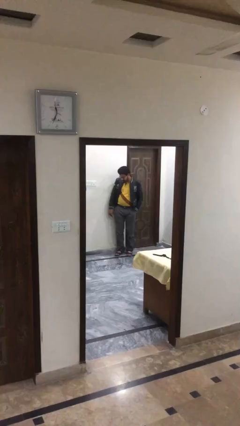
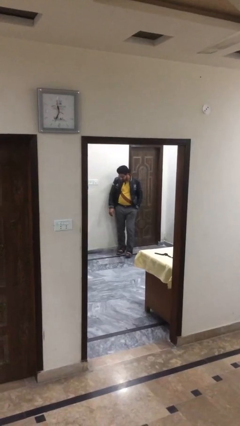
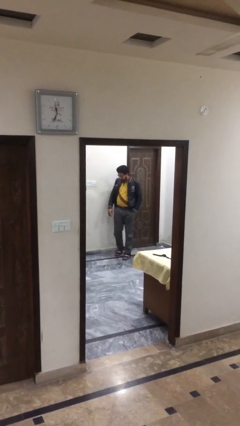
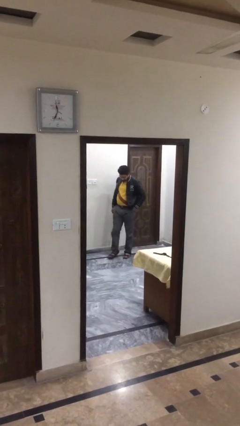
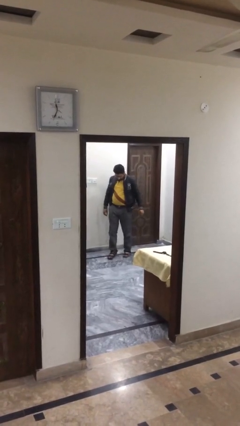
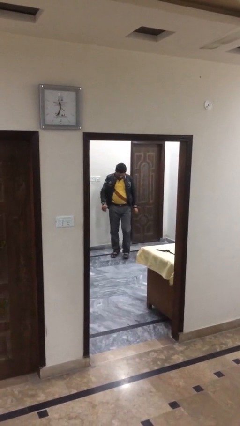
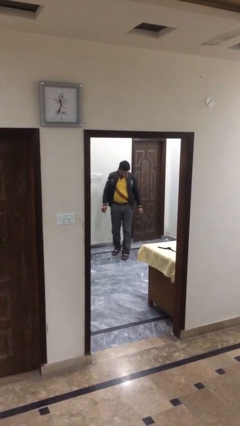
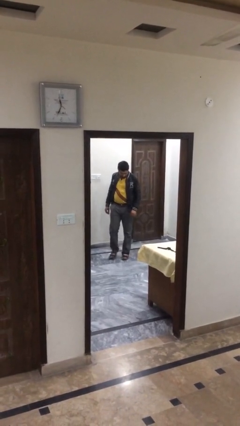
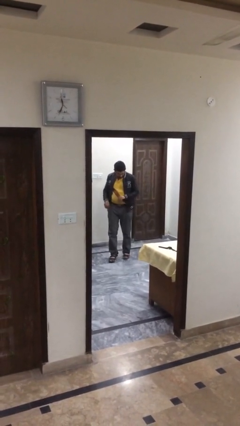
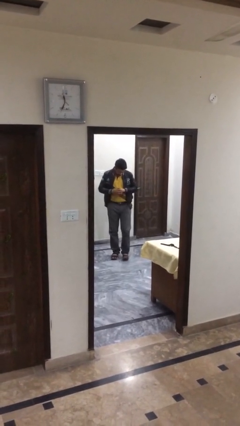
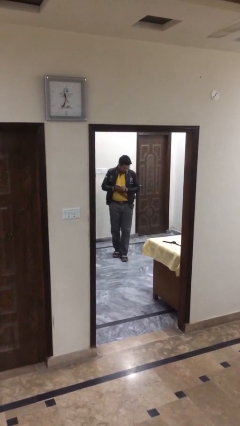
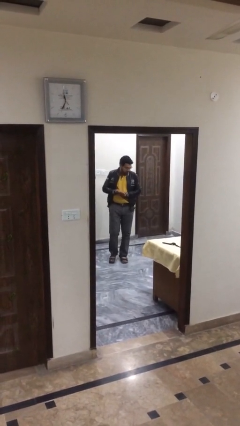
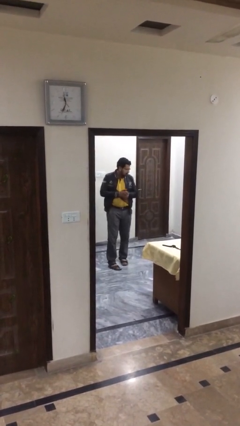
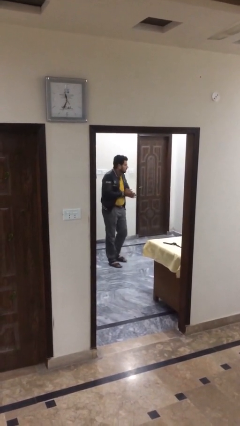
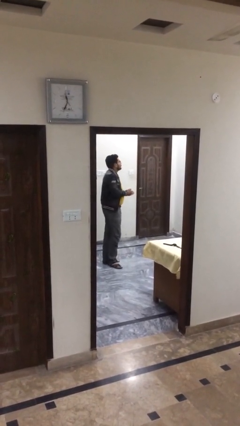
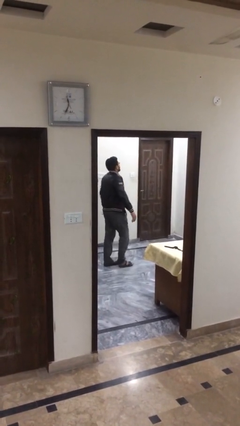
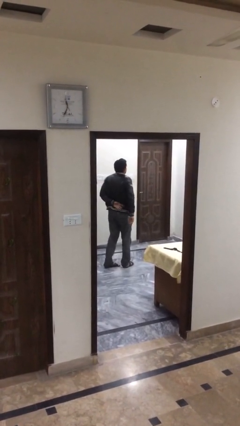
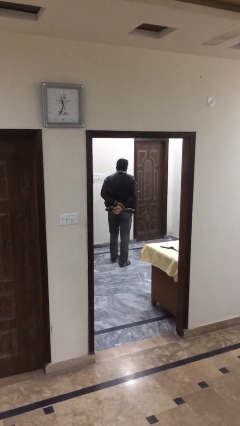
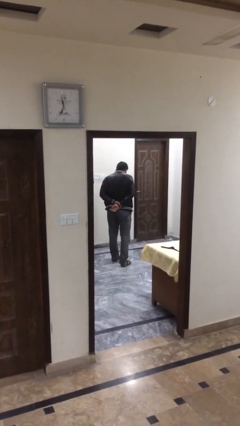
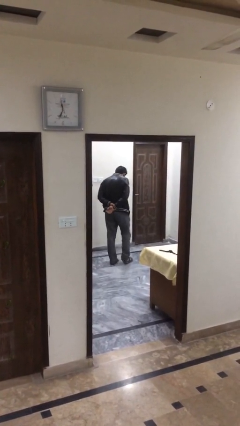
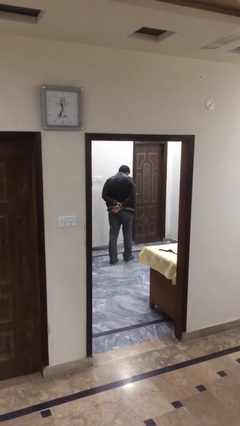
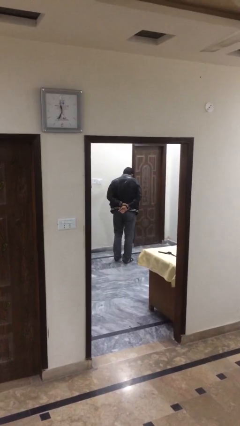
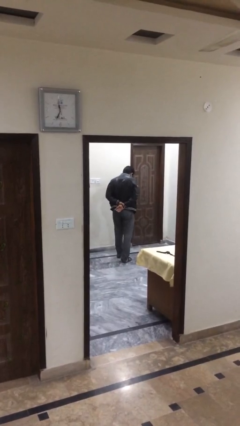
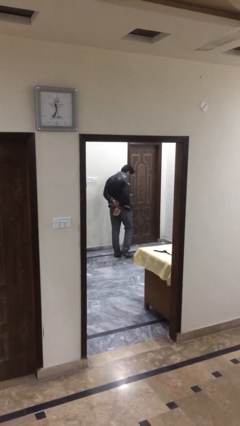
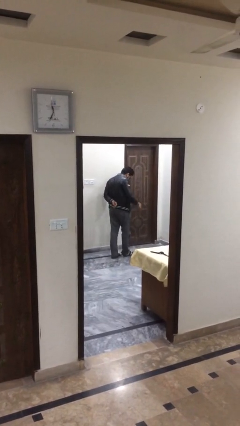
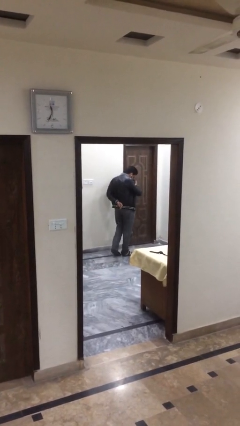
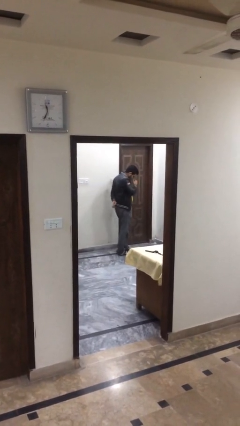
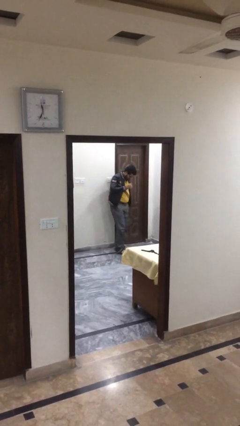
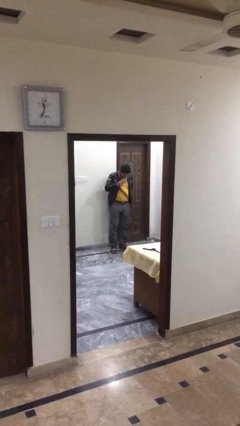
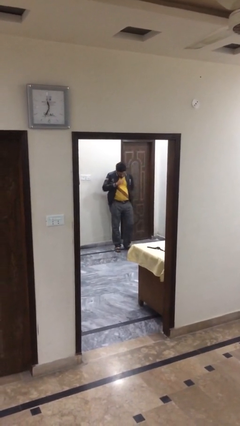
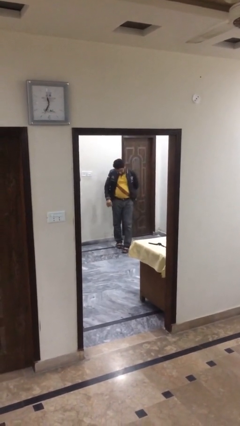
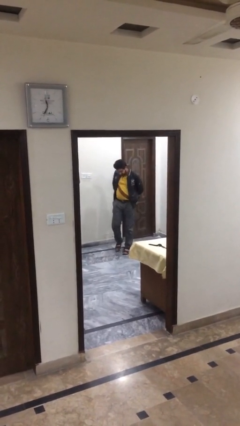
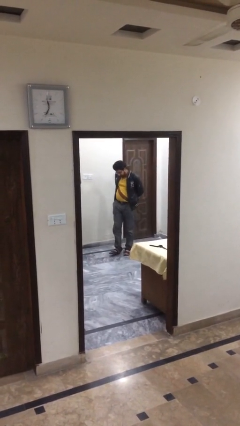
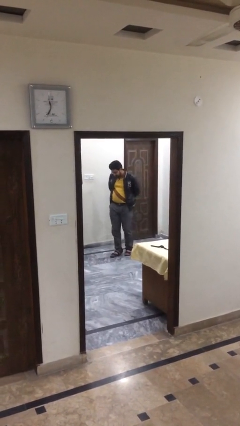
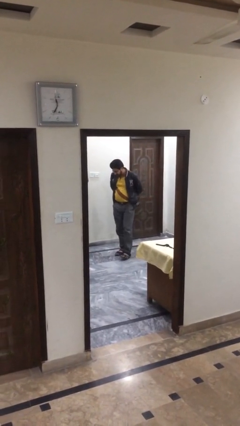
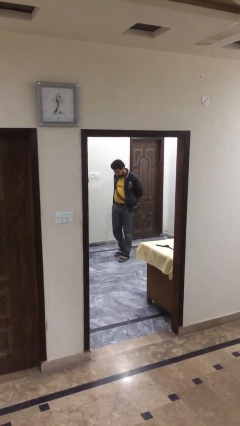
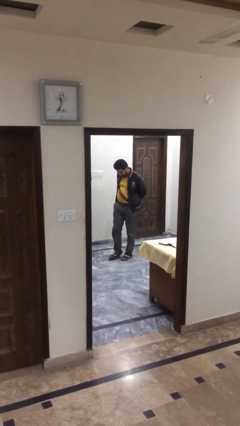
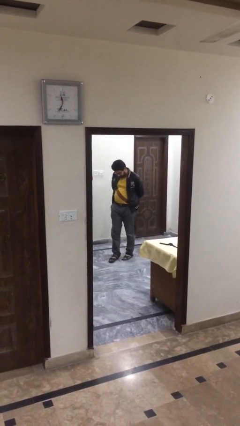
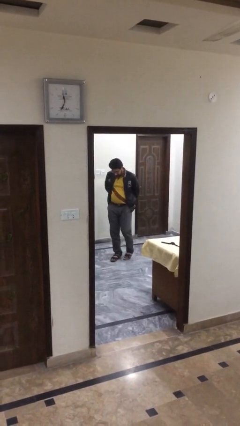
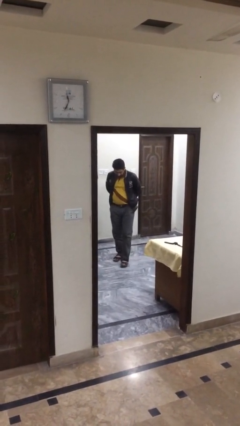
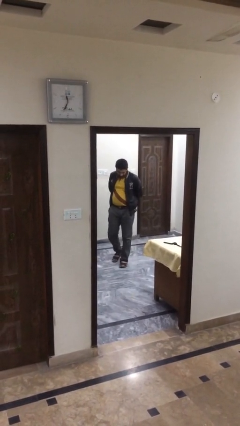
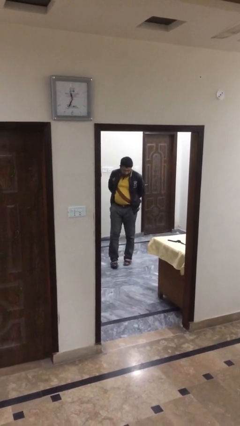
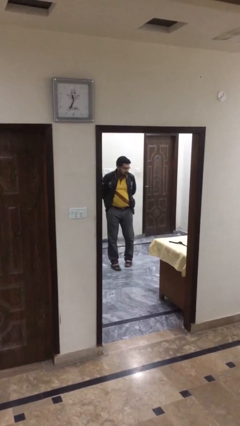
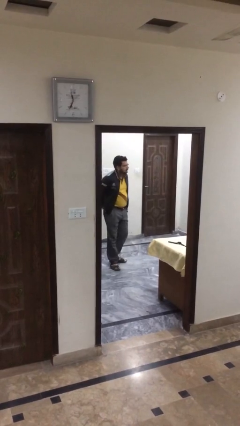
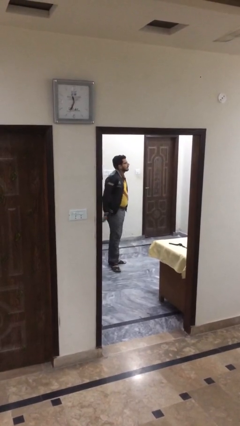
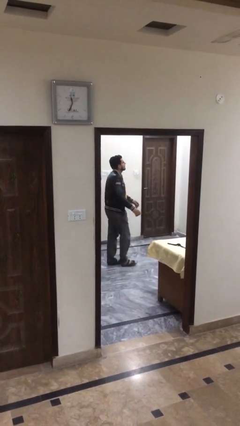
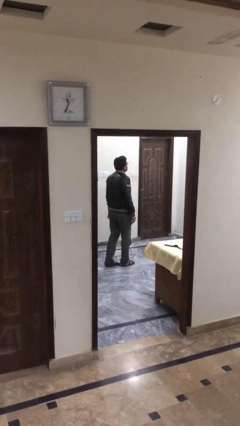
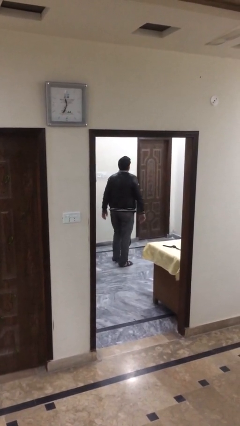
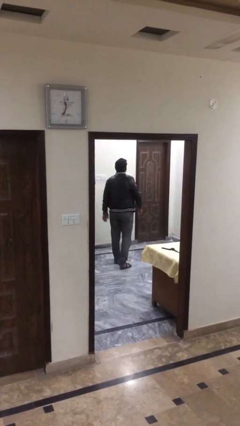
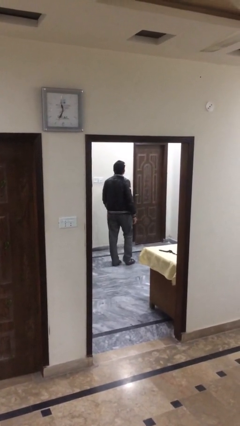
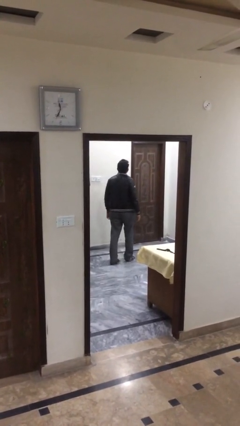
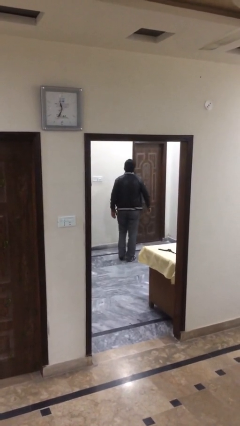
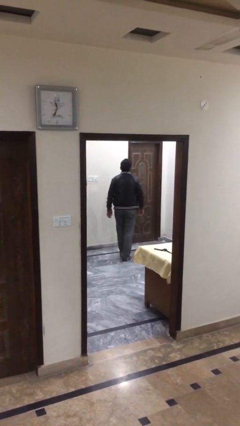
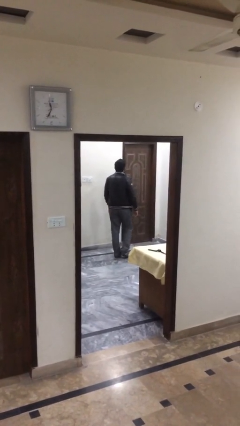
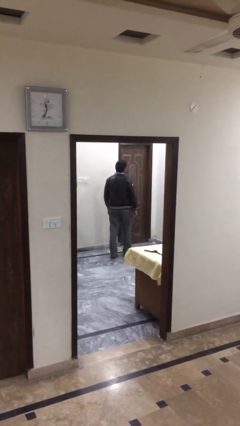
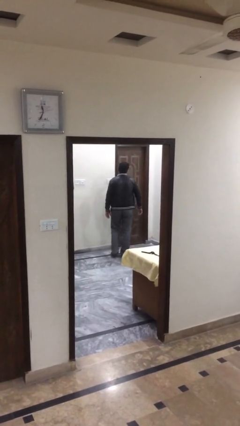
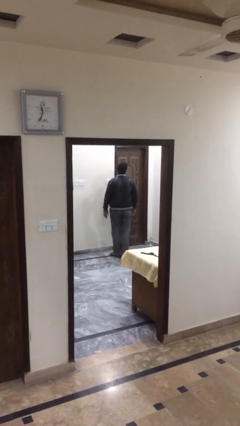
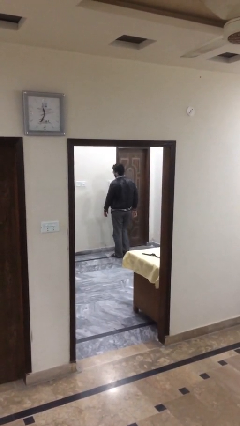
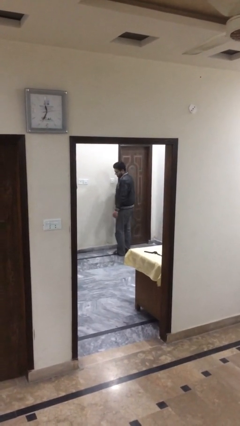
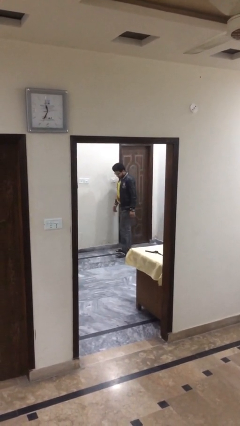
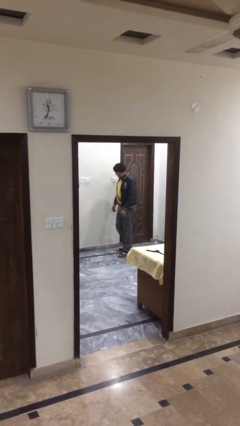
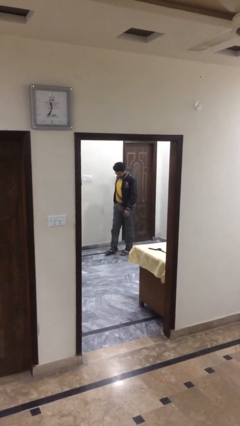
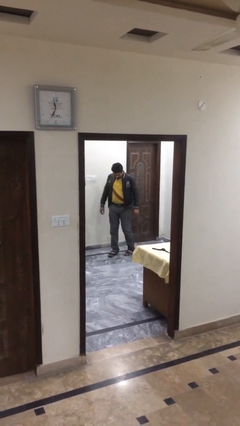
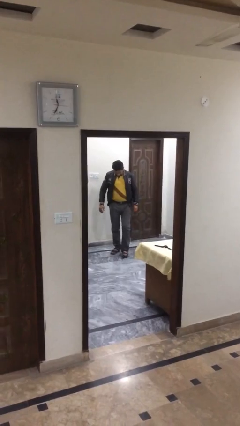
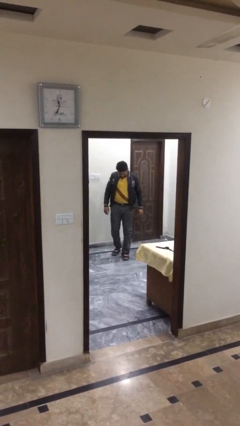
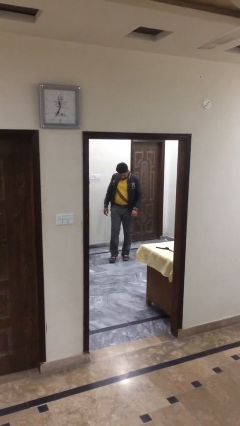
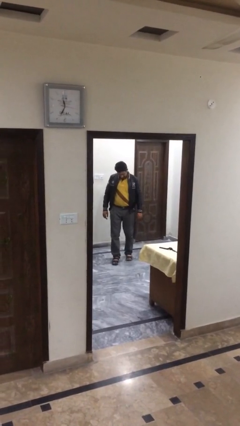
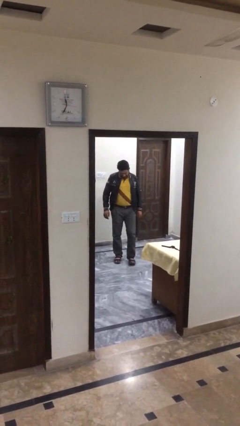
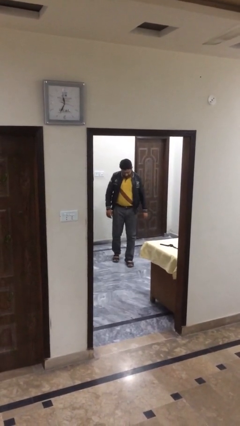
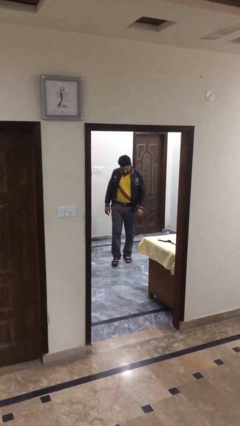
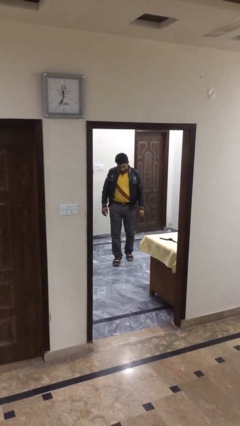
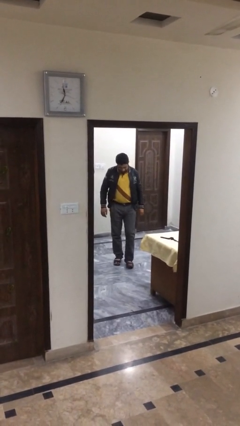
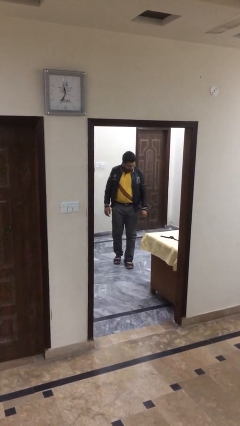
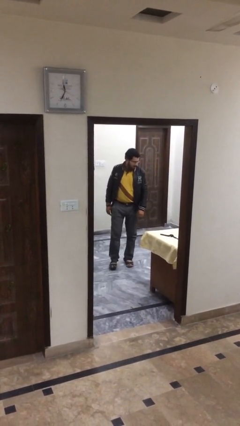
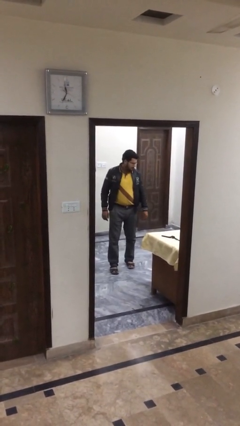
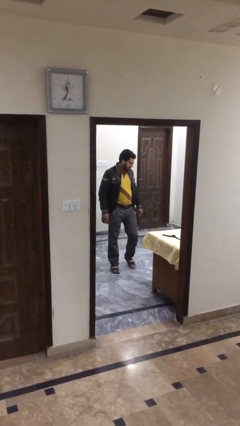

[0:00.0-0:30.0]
person walks

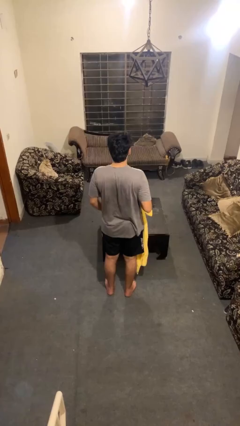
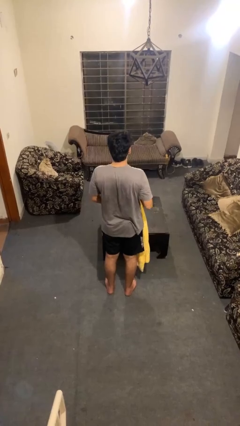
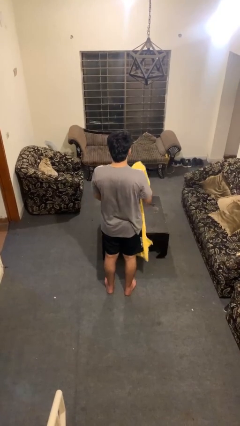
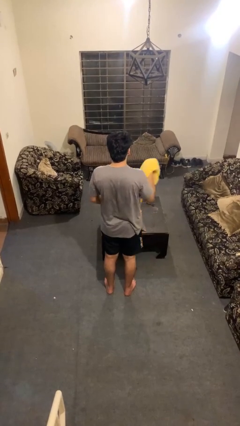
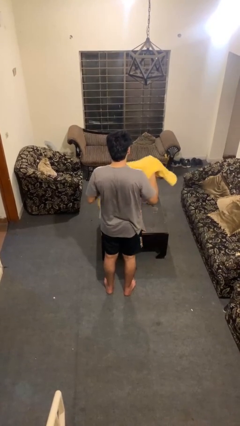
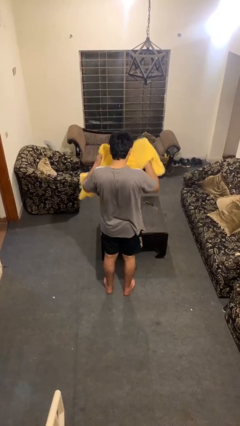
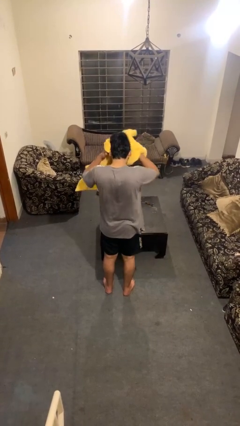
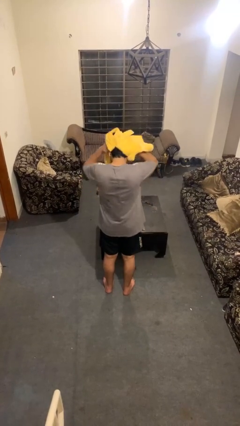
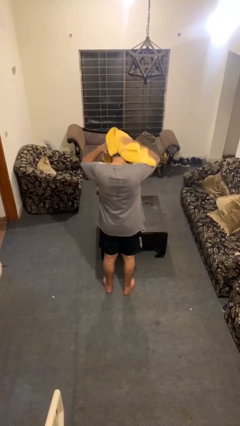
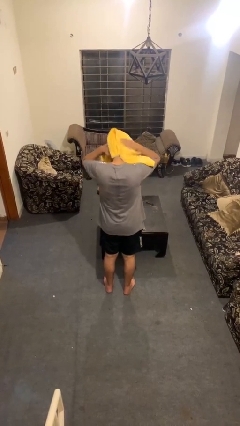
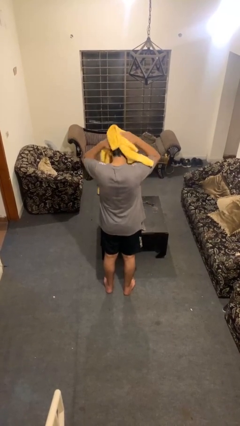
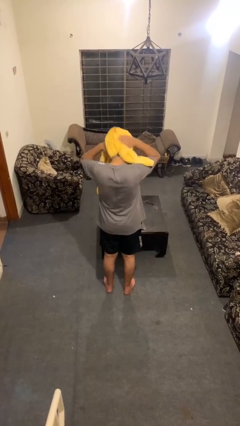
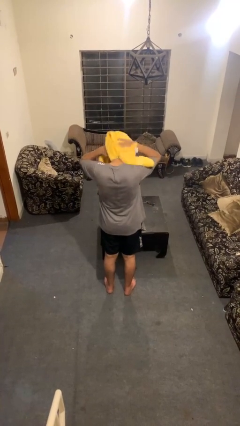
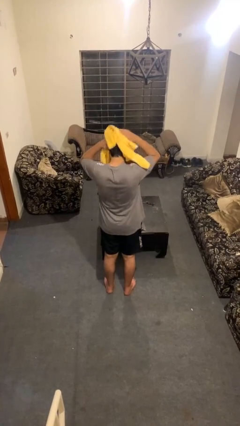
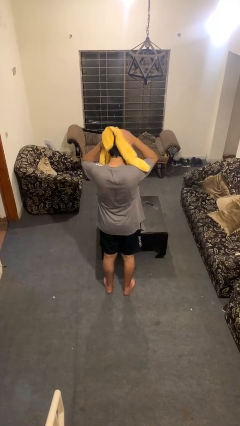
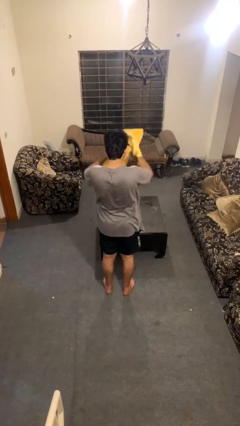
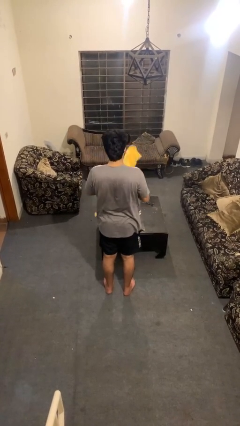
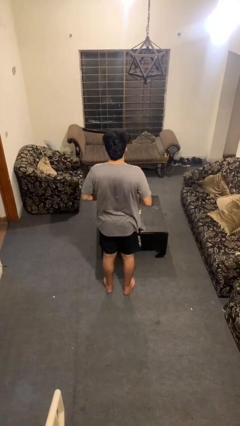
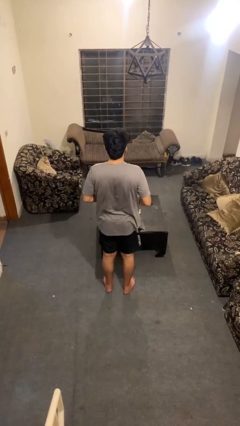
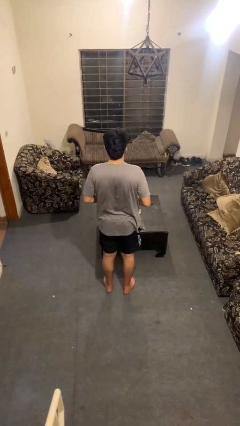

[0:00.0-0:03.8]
person dries hair with towel
